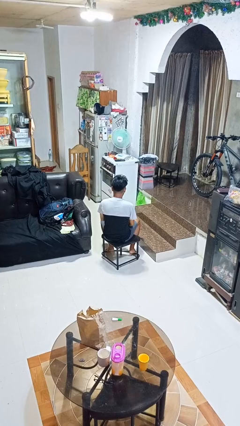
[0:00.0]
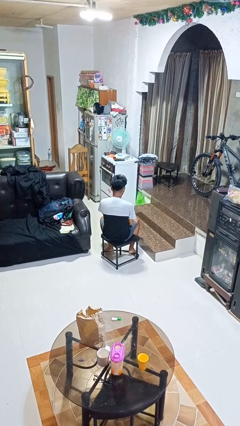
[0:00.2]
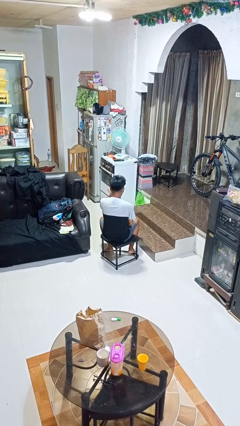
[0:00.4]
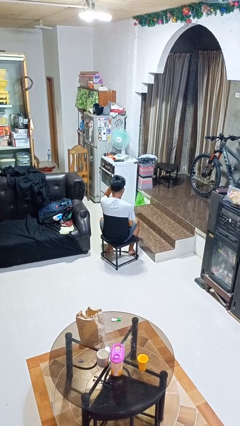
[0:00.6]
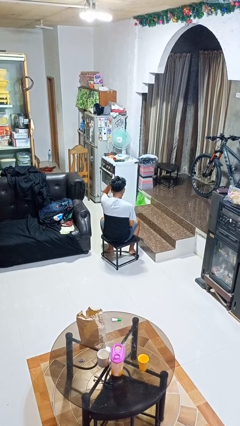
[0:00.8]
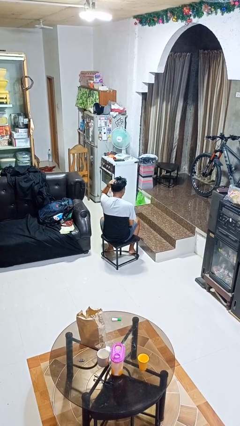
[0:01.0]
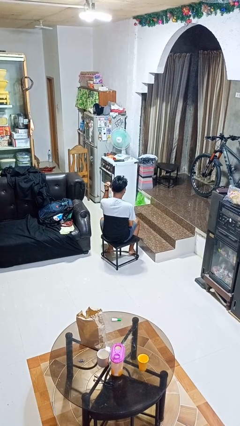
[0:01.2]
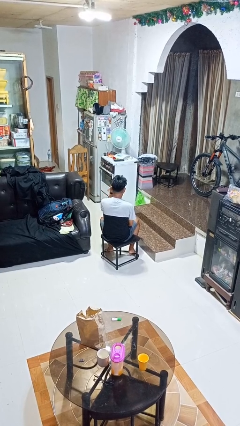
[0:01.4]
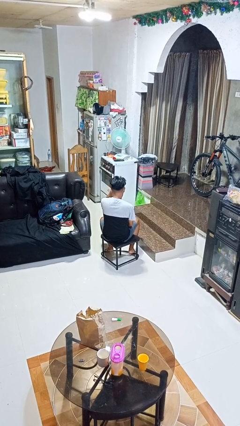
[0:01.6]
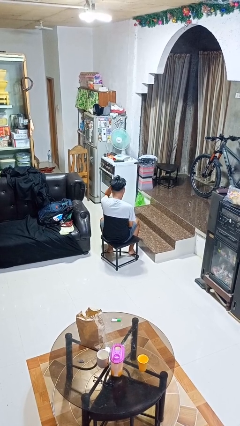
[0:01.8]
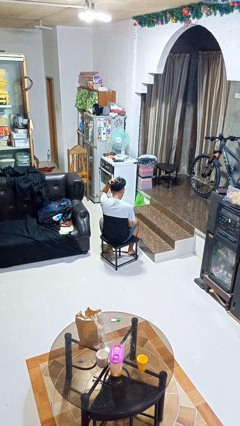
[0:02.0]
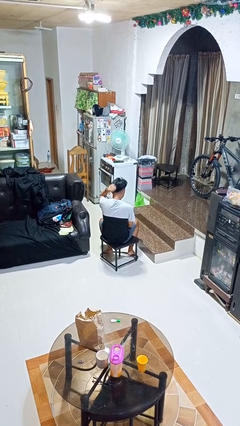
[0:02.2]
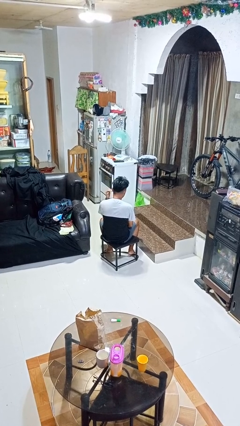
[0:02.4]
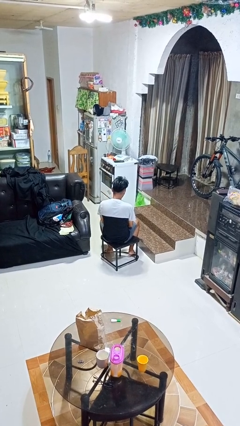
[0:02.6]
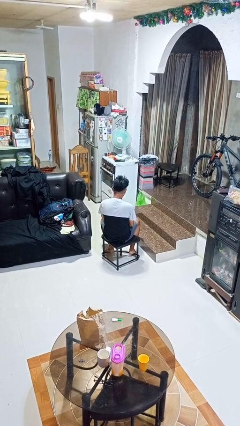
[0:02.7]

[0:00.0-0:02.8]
person strokes hair

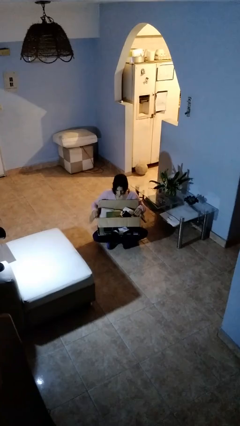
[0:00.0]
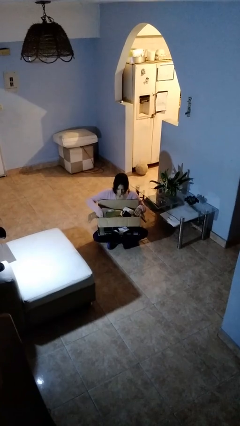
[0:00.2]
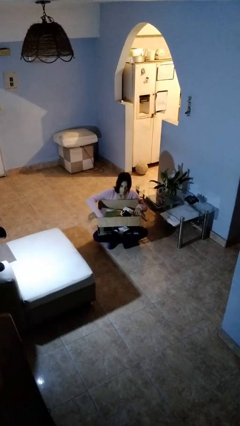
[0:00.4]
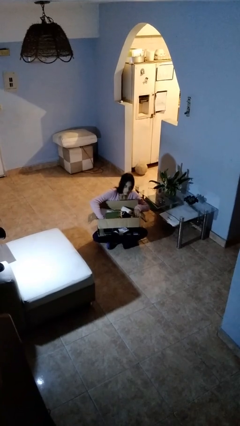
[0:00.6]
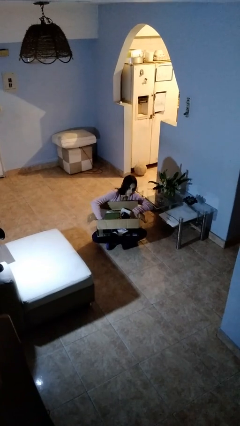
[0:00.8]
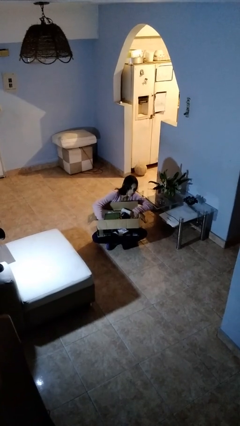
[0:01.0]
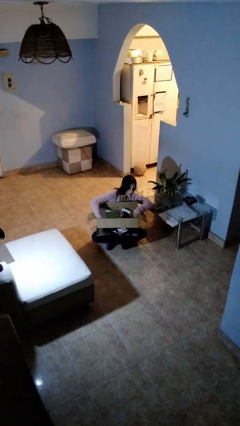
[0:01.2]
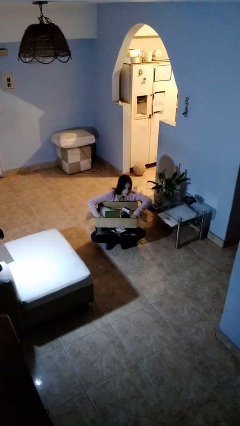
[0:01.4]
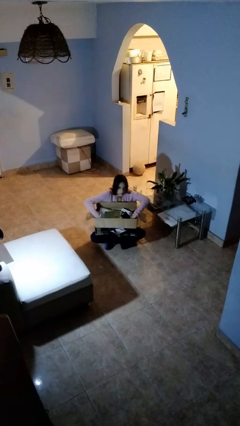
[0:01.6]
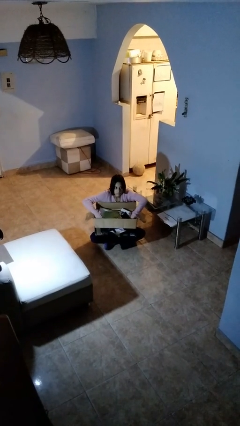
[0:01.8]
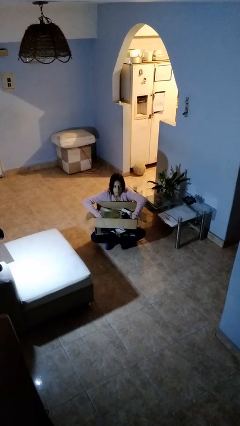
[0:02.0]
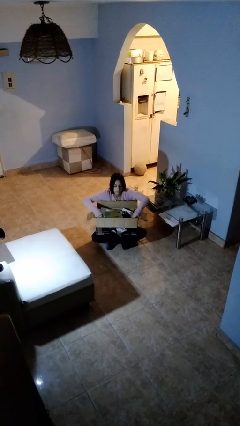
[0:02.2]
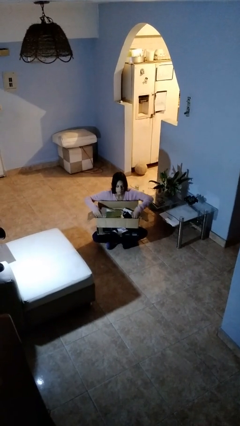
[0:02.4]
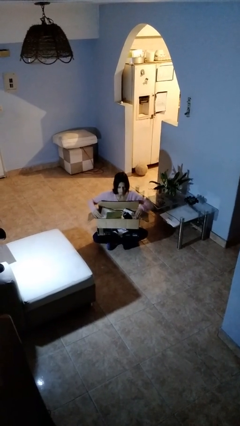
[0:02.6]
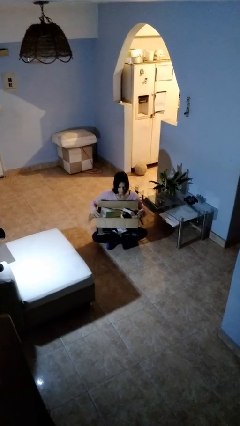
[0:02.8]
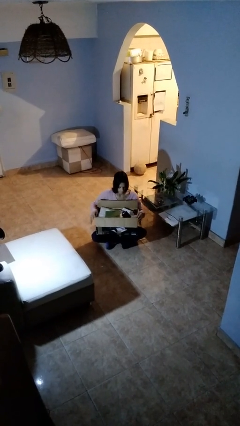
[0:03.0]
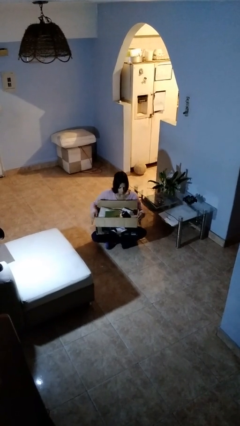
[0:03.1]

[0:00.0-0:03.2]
person searches in box

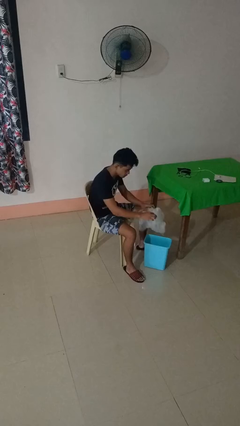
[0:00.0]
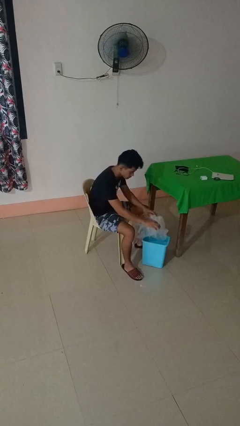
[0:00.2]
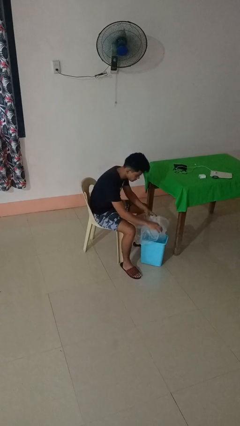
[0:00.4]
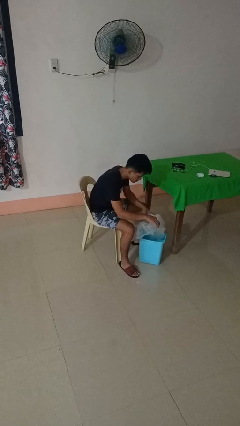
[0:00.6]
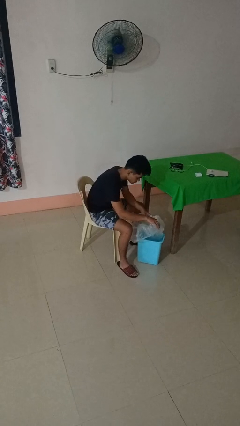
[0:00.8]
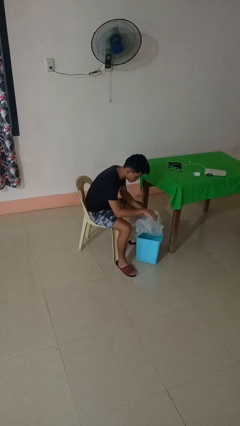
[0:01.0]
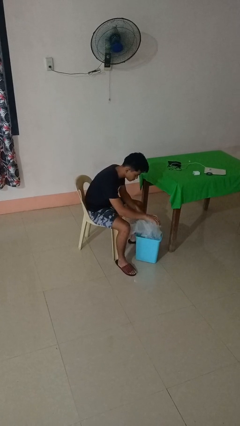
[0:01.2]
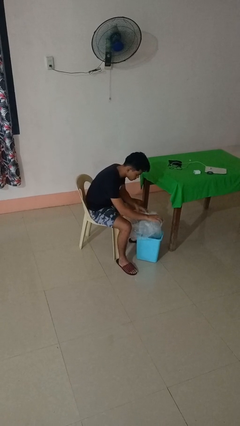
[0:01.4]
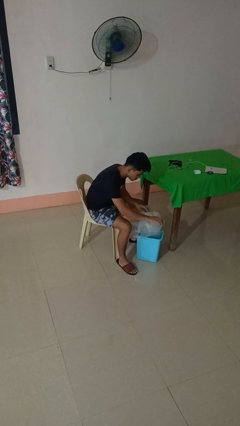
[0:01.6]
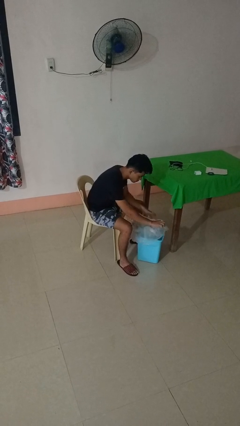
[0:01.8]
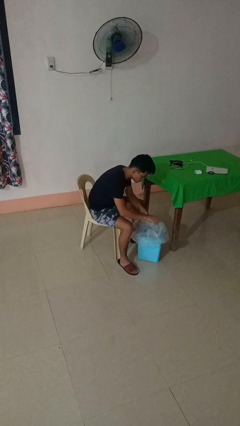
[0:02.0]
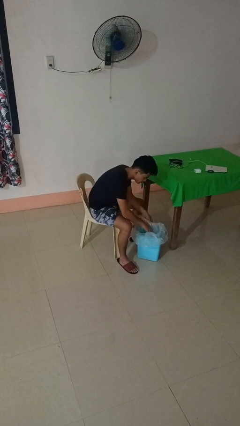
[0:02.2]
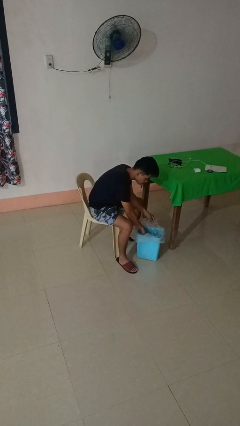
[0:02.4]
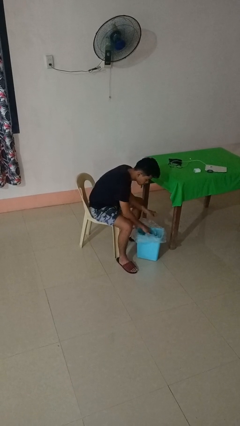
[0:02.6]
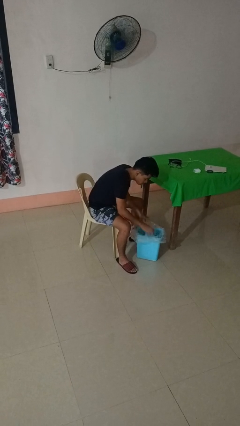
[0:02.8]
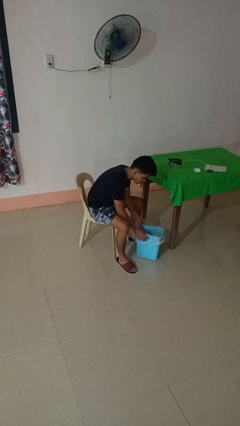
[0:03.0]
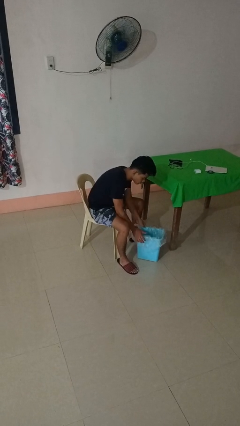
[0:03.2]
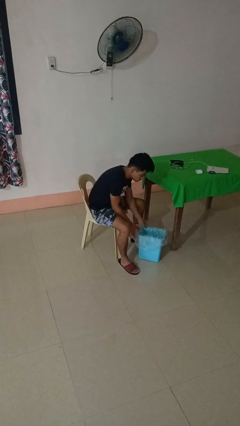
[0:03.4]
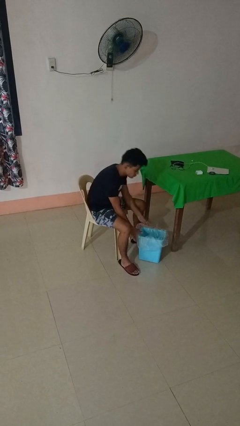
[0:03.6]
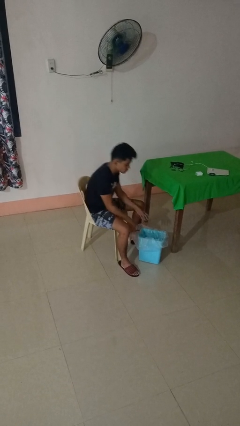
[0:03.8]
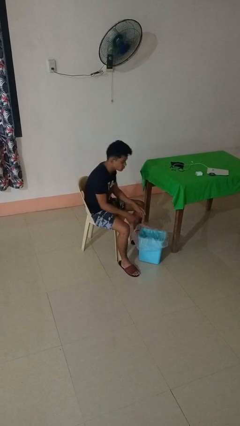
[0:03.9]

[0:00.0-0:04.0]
person inserts trashbag into trashcan

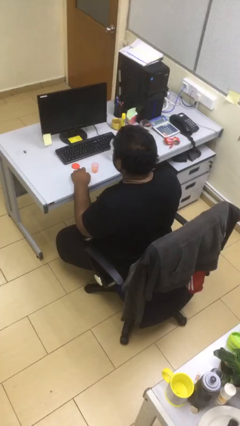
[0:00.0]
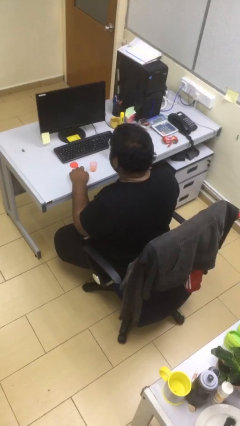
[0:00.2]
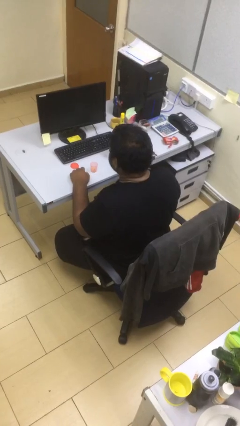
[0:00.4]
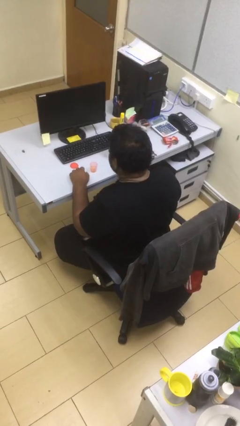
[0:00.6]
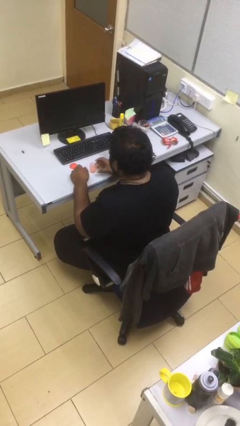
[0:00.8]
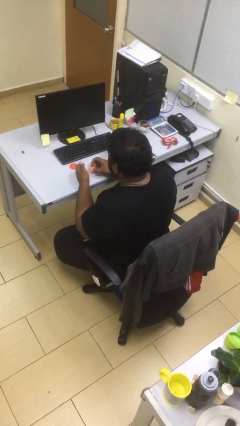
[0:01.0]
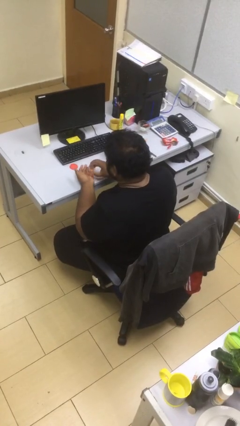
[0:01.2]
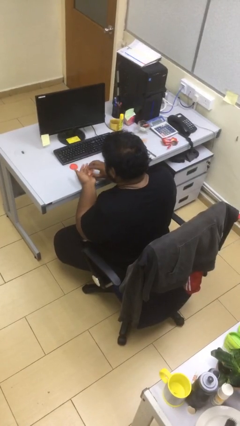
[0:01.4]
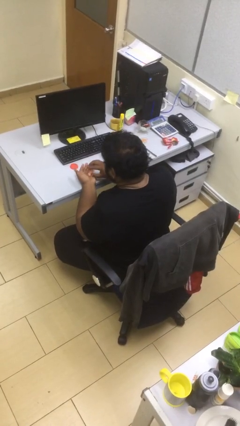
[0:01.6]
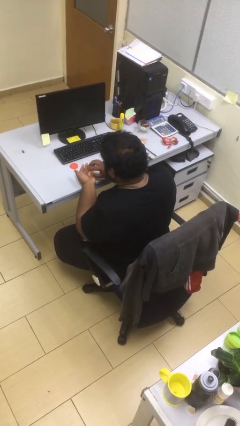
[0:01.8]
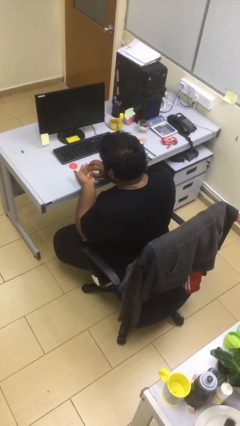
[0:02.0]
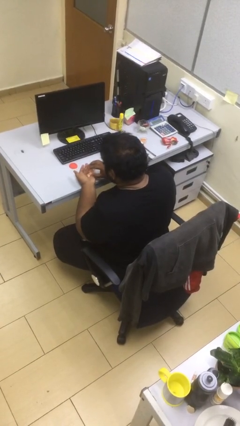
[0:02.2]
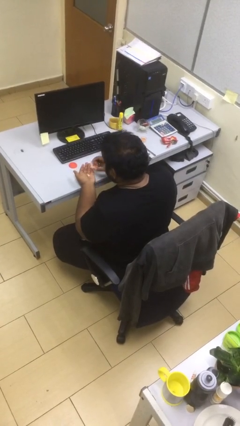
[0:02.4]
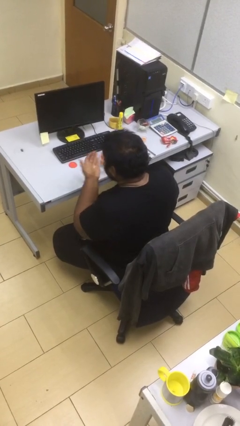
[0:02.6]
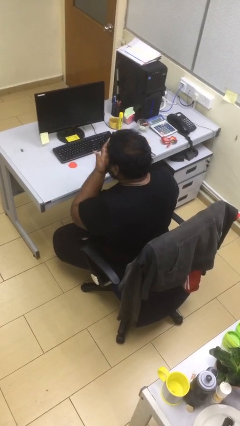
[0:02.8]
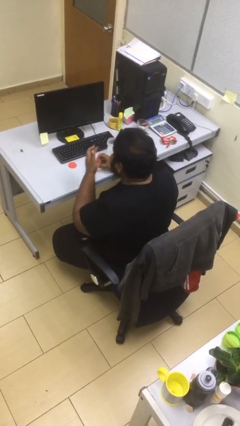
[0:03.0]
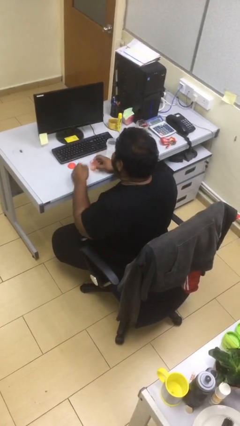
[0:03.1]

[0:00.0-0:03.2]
person takes medicine pills

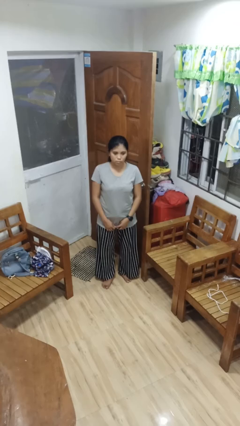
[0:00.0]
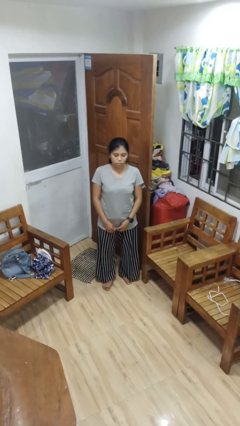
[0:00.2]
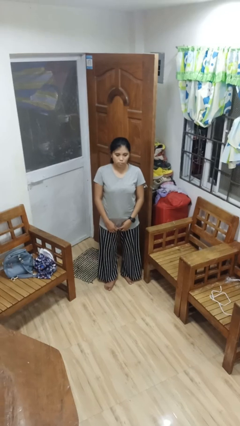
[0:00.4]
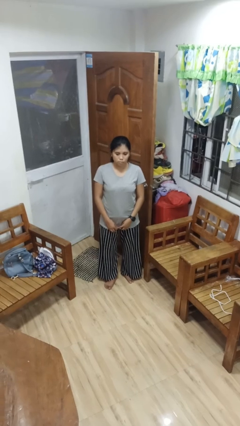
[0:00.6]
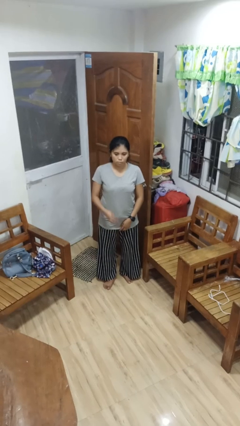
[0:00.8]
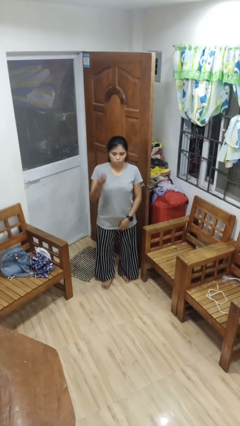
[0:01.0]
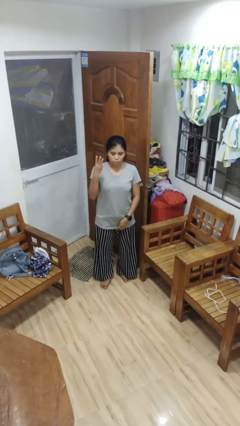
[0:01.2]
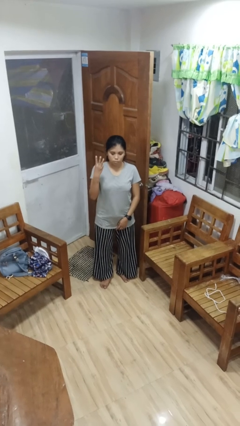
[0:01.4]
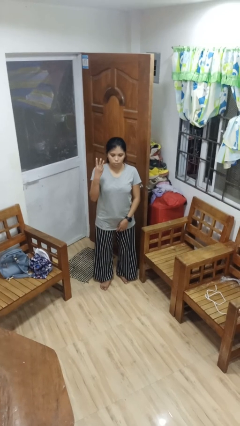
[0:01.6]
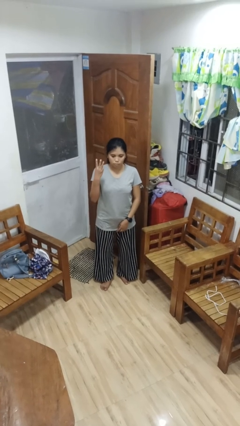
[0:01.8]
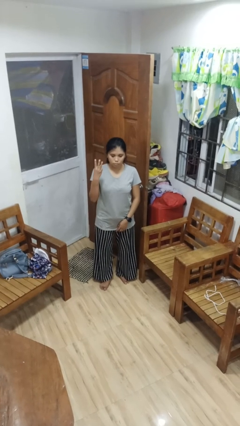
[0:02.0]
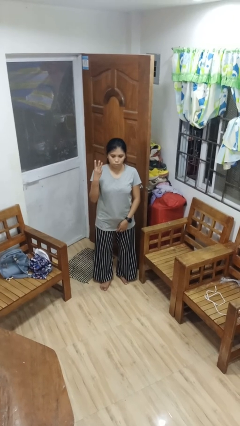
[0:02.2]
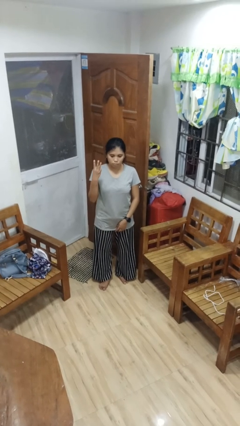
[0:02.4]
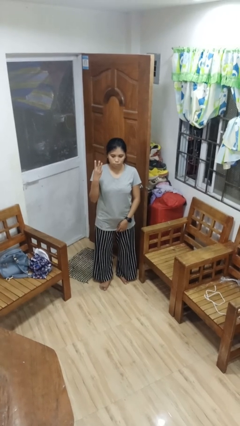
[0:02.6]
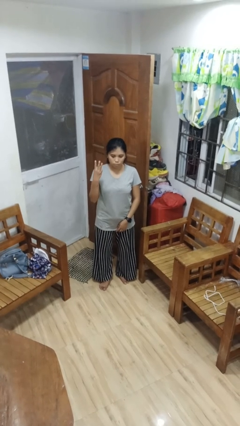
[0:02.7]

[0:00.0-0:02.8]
person gestures number three

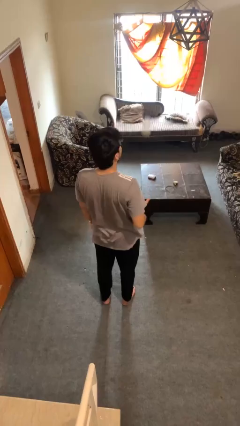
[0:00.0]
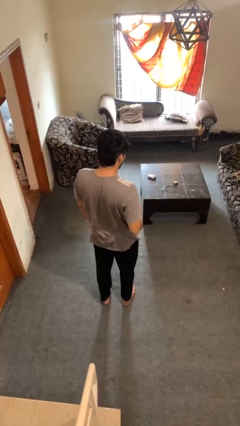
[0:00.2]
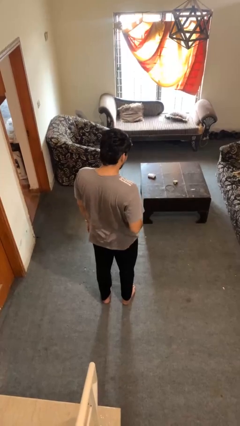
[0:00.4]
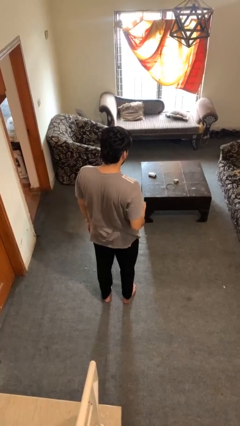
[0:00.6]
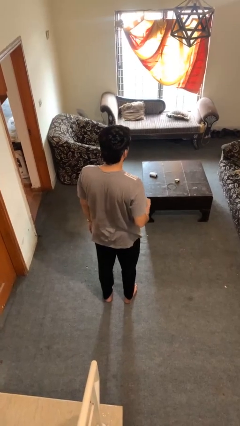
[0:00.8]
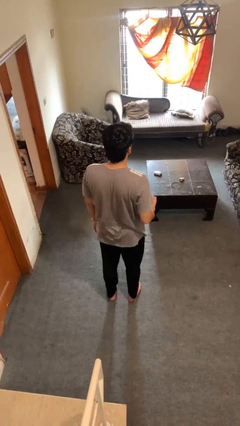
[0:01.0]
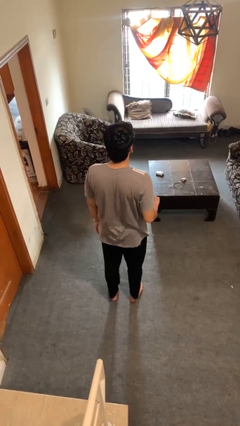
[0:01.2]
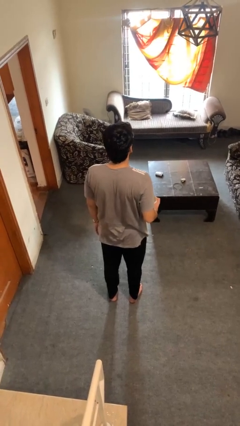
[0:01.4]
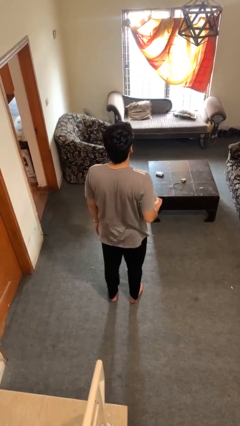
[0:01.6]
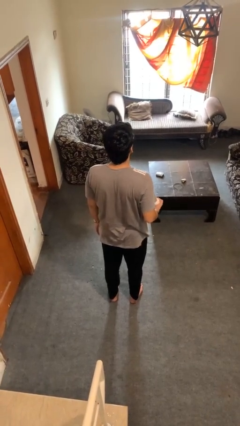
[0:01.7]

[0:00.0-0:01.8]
person catches dropped object
